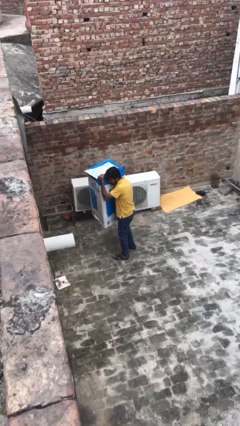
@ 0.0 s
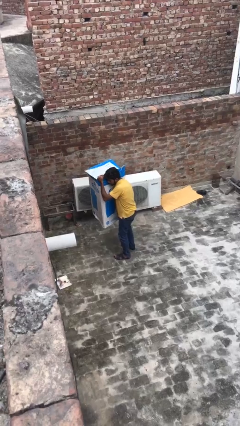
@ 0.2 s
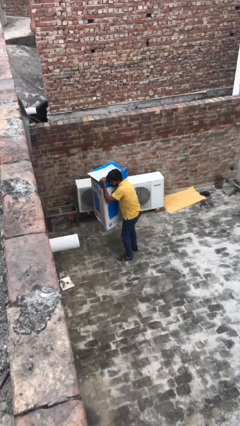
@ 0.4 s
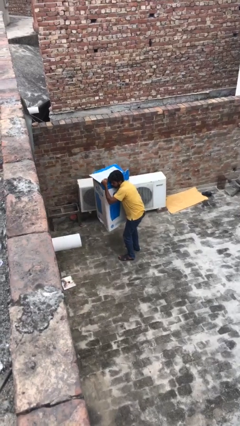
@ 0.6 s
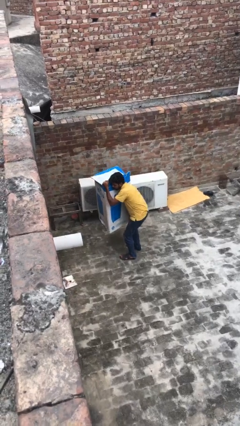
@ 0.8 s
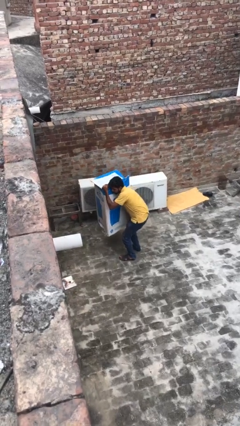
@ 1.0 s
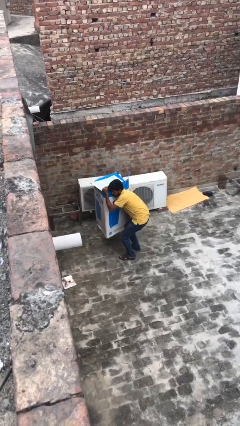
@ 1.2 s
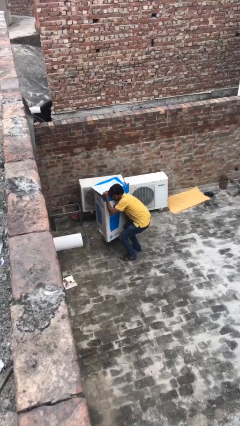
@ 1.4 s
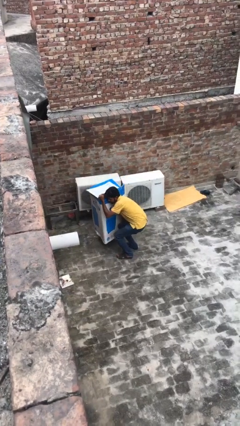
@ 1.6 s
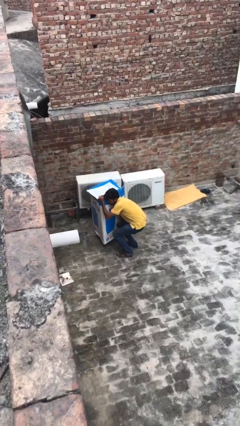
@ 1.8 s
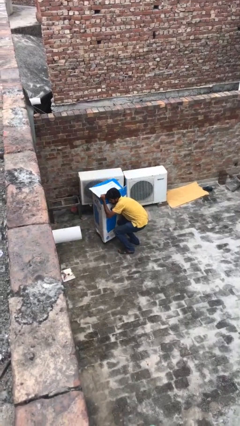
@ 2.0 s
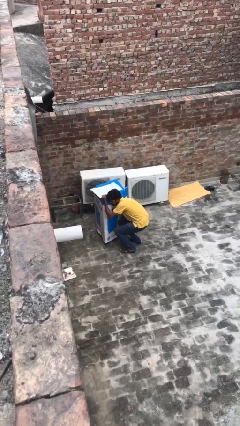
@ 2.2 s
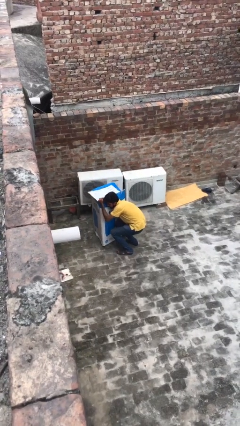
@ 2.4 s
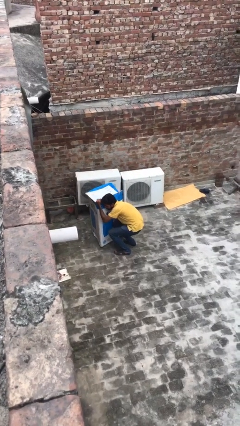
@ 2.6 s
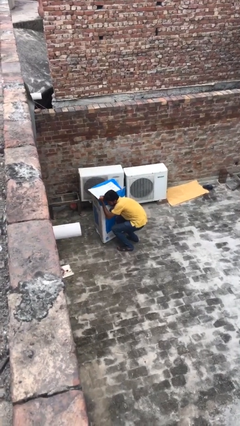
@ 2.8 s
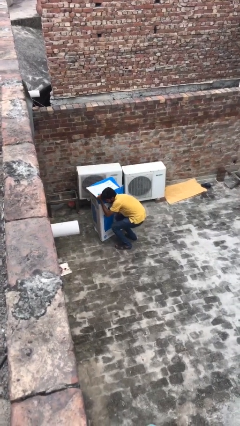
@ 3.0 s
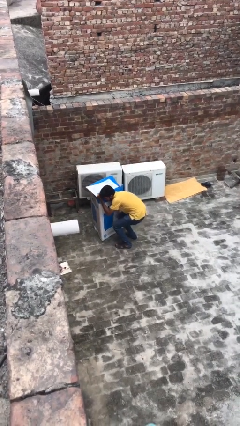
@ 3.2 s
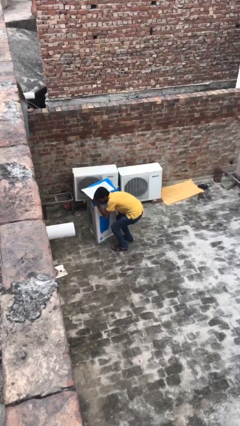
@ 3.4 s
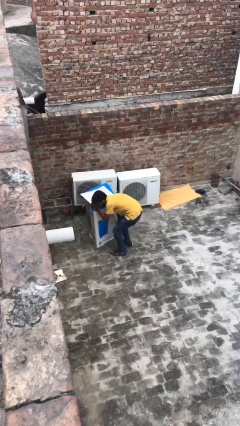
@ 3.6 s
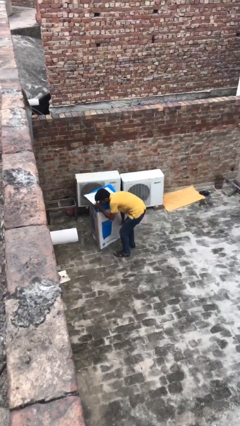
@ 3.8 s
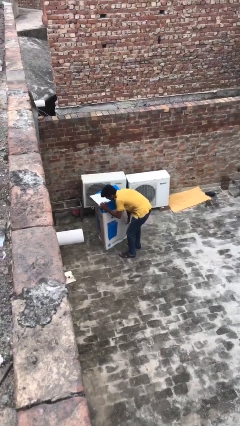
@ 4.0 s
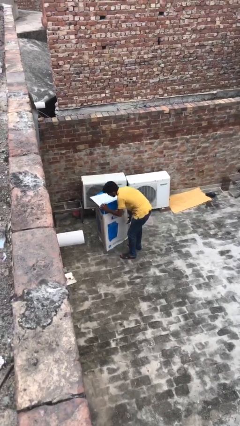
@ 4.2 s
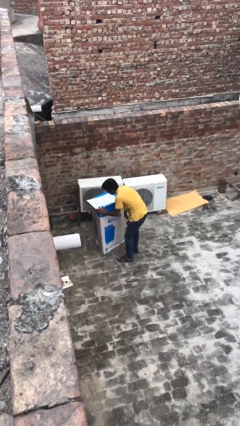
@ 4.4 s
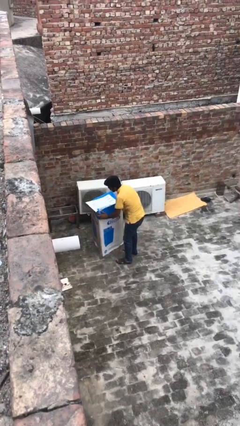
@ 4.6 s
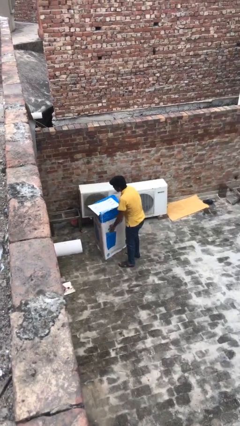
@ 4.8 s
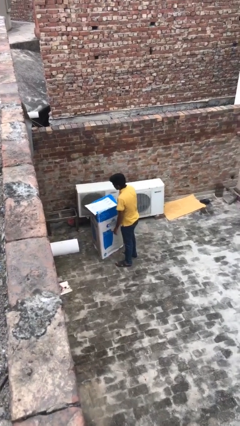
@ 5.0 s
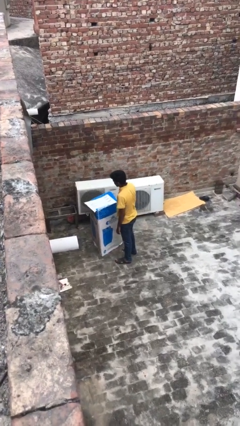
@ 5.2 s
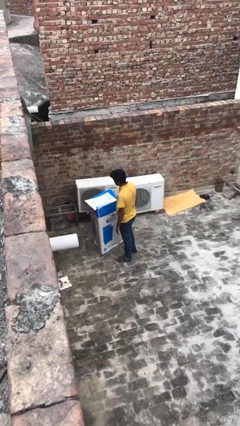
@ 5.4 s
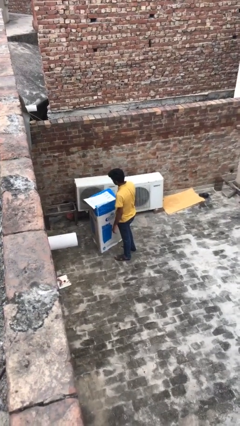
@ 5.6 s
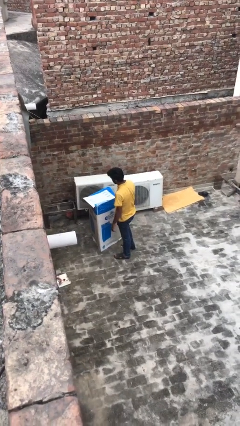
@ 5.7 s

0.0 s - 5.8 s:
person puts down object on floor

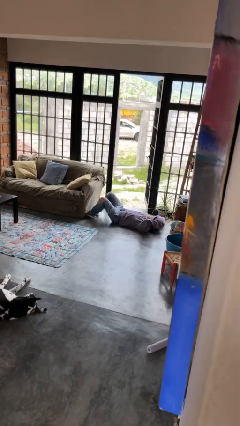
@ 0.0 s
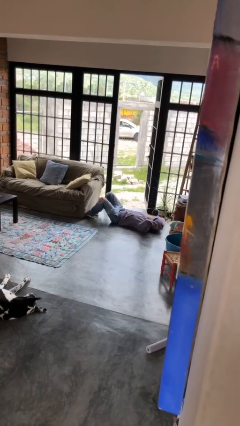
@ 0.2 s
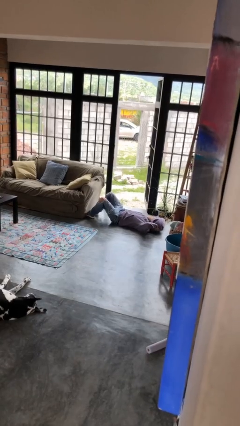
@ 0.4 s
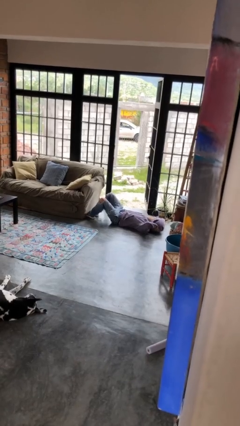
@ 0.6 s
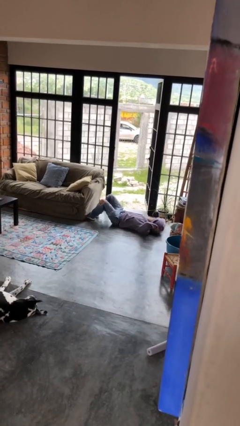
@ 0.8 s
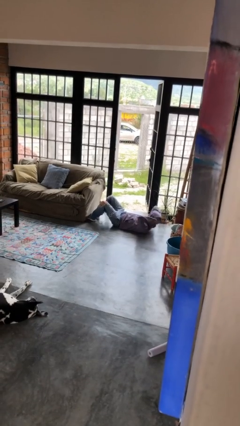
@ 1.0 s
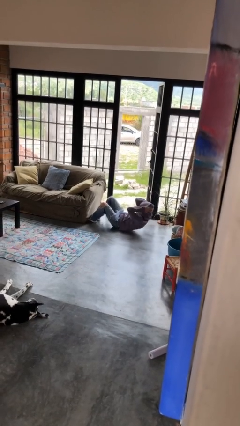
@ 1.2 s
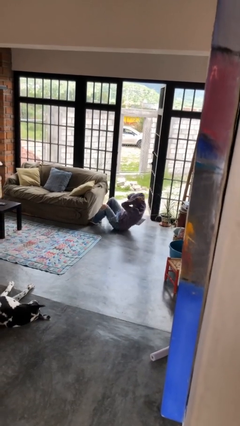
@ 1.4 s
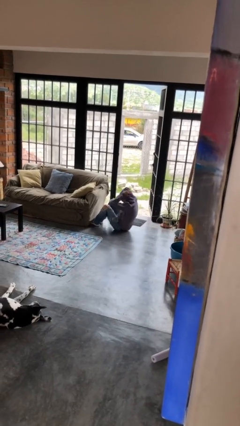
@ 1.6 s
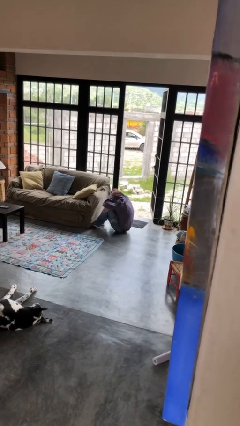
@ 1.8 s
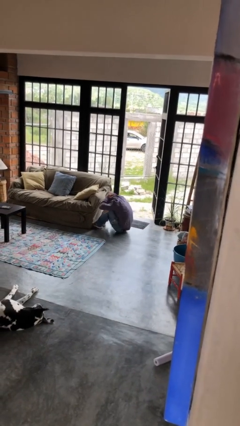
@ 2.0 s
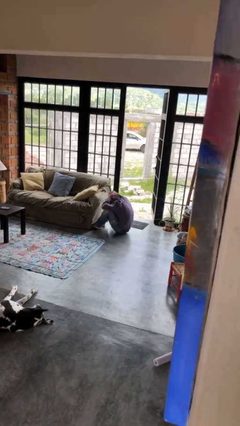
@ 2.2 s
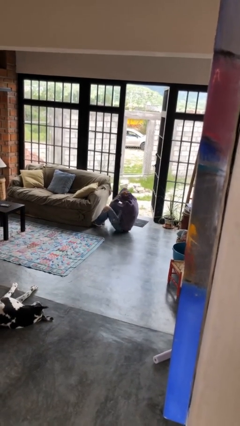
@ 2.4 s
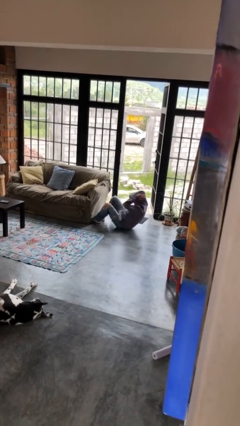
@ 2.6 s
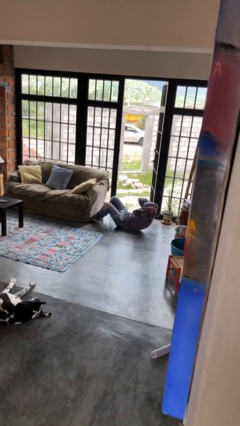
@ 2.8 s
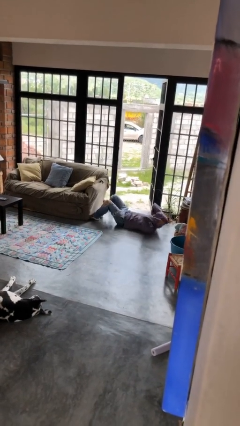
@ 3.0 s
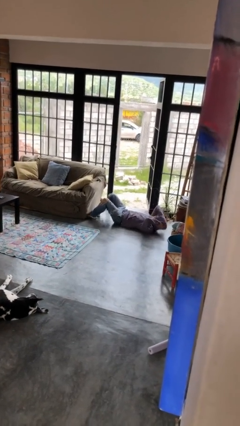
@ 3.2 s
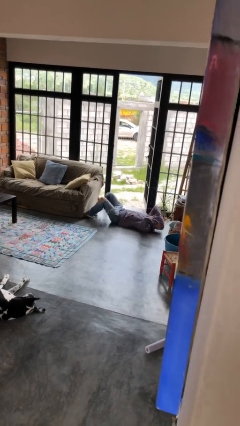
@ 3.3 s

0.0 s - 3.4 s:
person exercises with situp

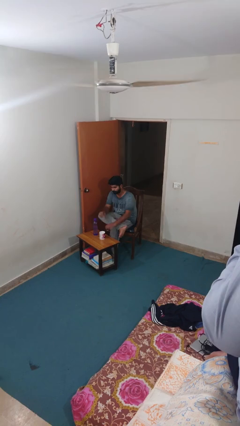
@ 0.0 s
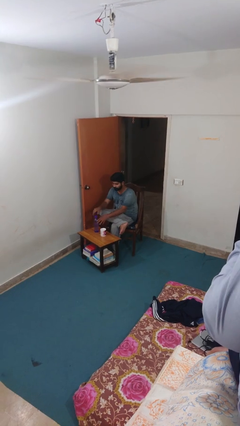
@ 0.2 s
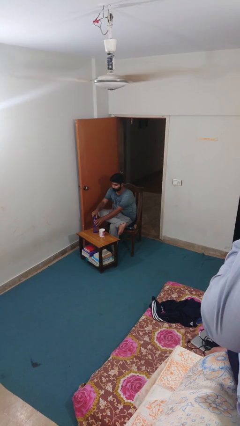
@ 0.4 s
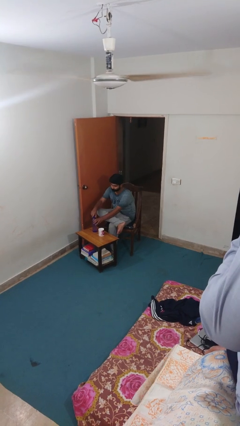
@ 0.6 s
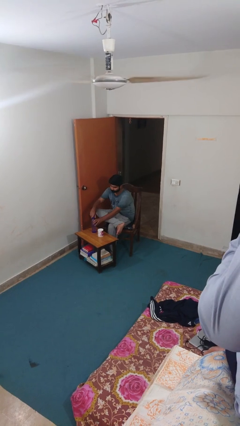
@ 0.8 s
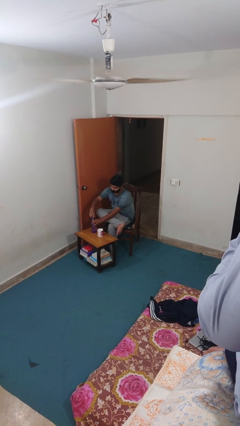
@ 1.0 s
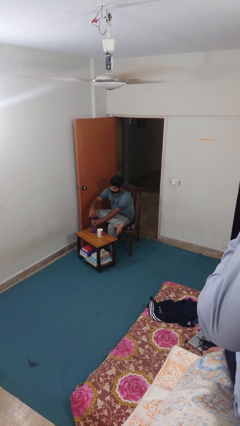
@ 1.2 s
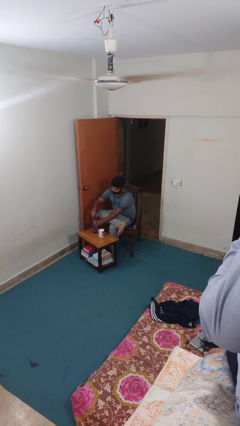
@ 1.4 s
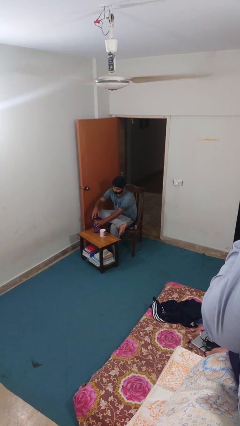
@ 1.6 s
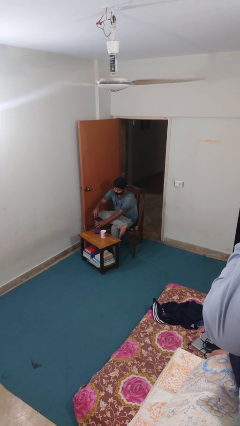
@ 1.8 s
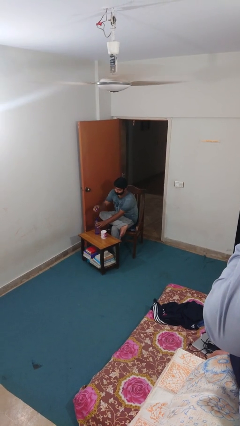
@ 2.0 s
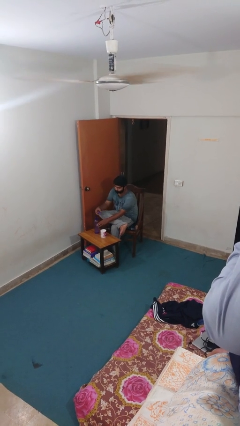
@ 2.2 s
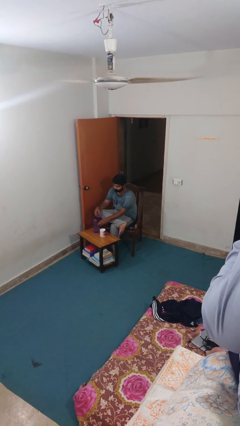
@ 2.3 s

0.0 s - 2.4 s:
person unscrews lid from bottle

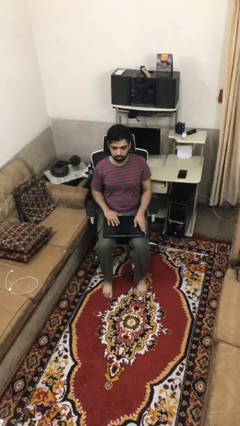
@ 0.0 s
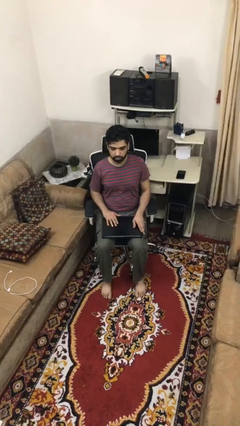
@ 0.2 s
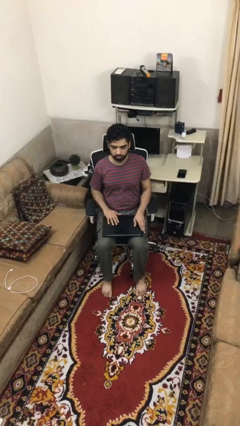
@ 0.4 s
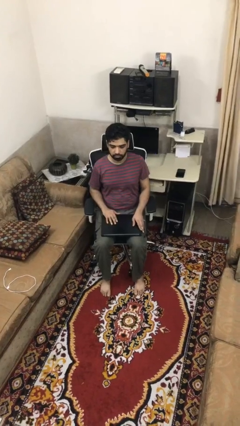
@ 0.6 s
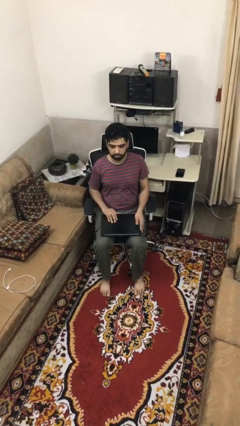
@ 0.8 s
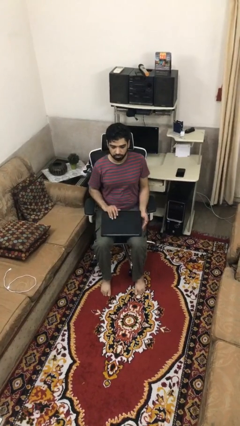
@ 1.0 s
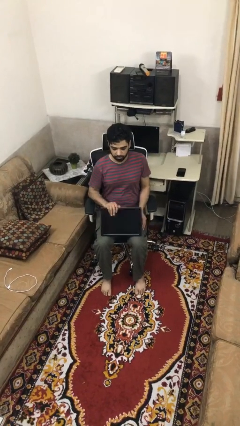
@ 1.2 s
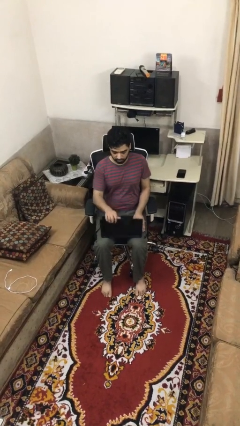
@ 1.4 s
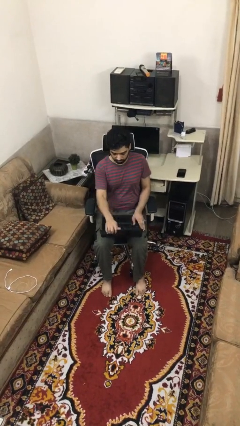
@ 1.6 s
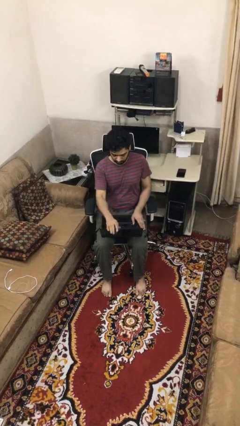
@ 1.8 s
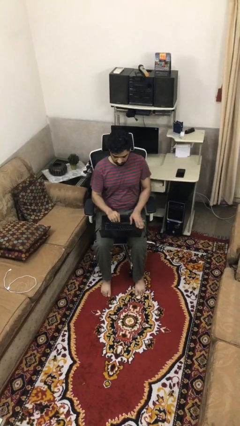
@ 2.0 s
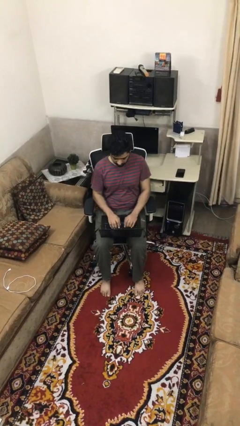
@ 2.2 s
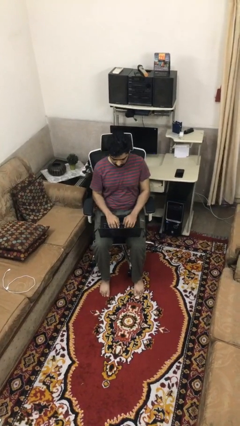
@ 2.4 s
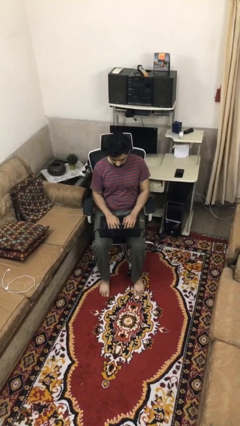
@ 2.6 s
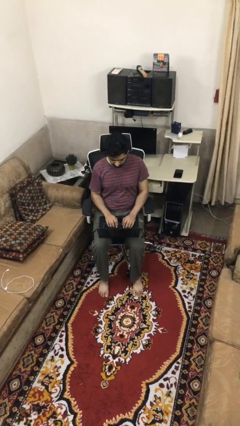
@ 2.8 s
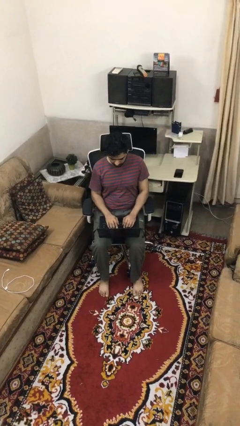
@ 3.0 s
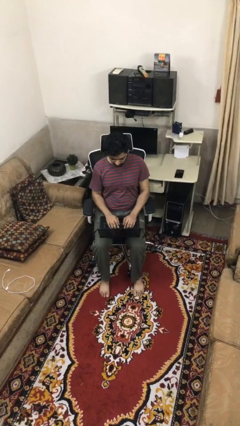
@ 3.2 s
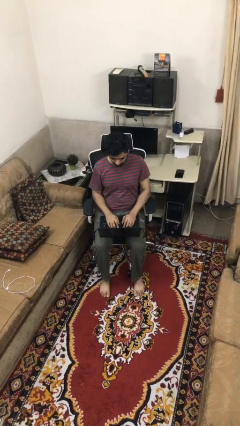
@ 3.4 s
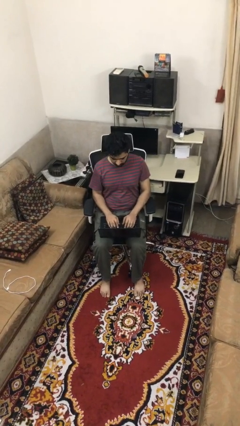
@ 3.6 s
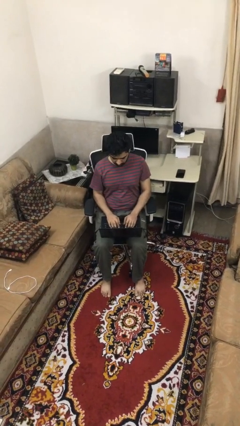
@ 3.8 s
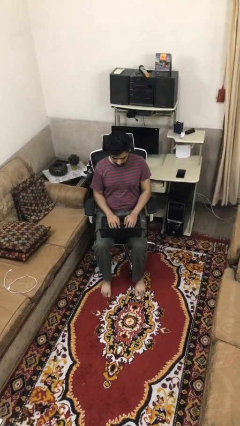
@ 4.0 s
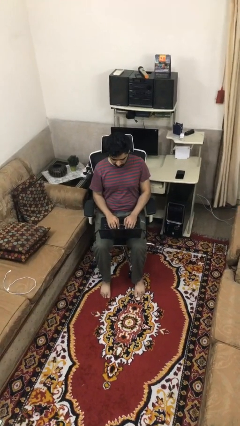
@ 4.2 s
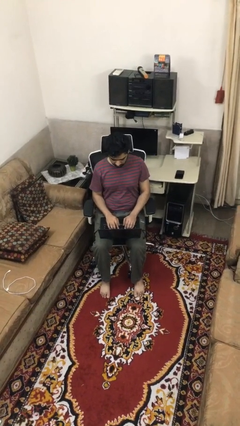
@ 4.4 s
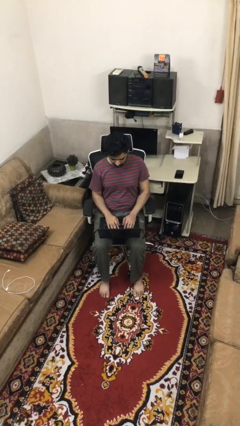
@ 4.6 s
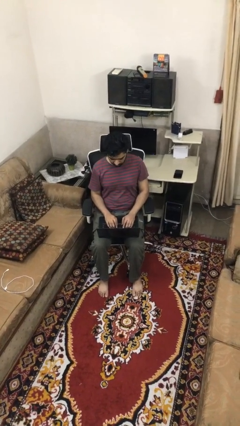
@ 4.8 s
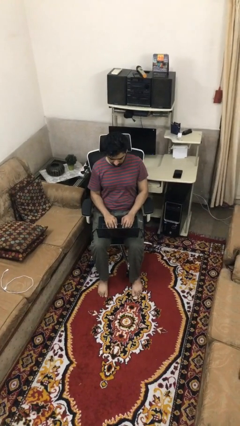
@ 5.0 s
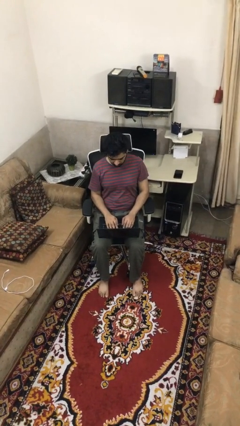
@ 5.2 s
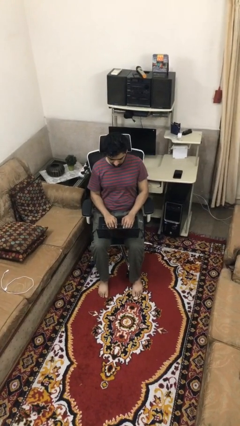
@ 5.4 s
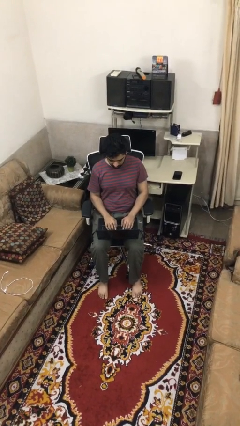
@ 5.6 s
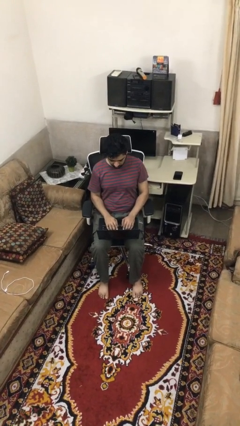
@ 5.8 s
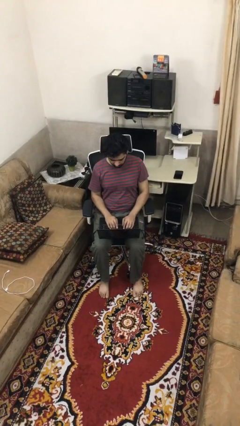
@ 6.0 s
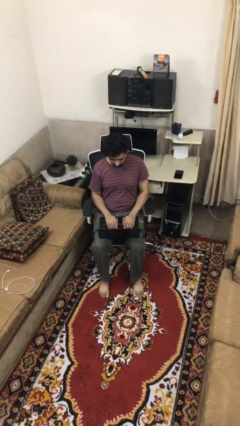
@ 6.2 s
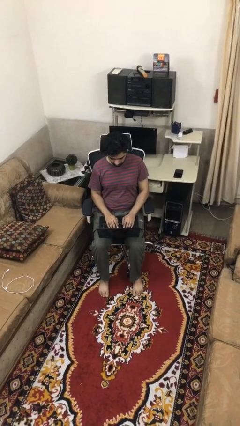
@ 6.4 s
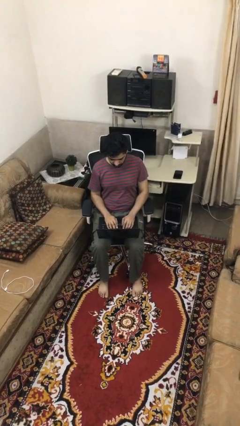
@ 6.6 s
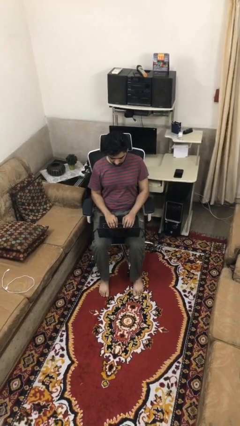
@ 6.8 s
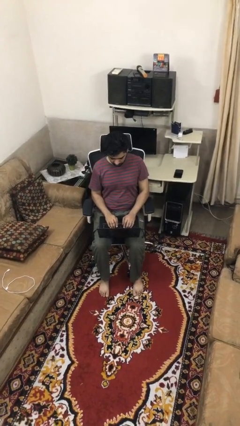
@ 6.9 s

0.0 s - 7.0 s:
person interacts with laptop
